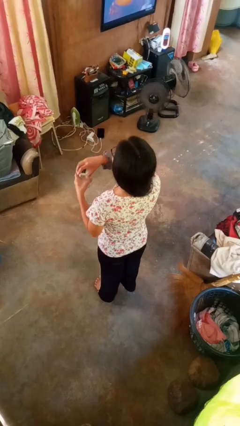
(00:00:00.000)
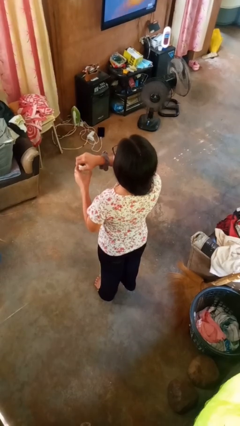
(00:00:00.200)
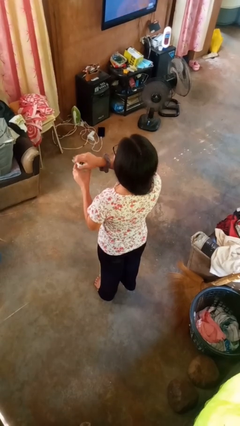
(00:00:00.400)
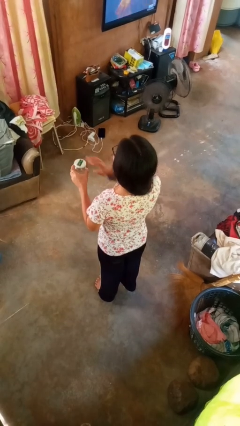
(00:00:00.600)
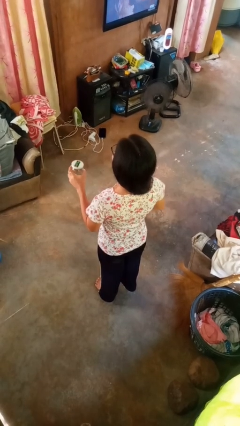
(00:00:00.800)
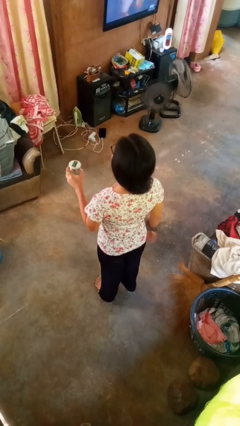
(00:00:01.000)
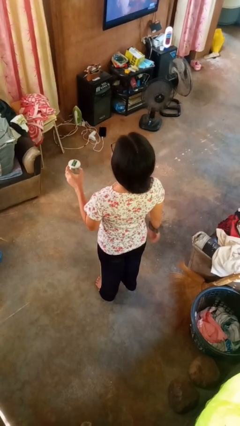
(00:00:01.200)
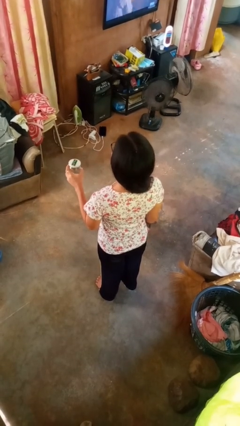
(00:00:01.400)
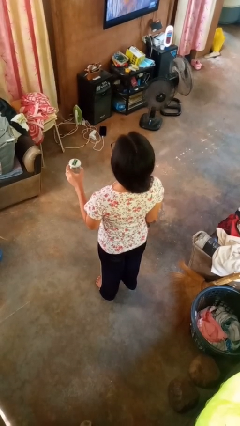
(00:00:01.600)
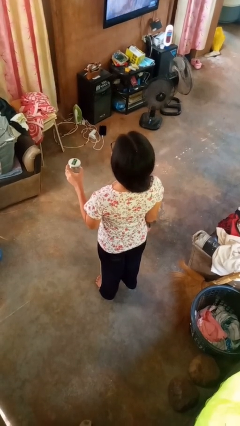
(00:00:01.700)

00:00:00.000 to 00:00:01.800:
person closes jar

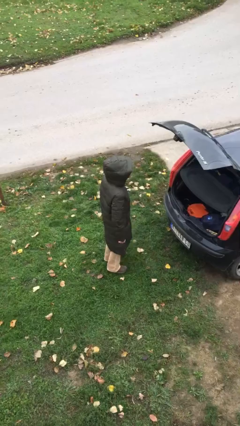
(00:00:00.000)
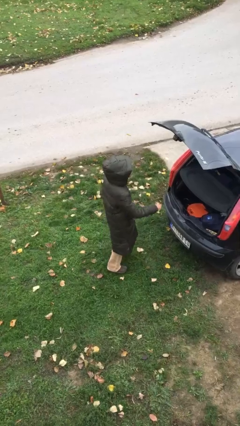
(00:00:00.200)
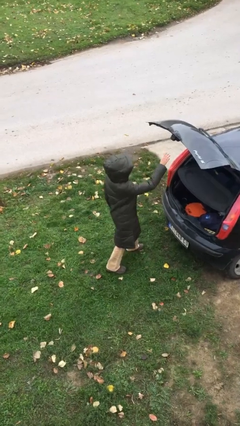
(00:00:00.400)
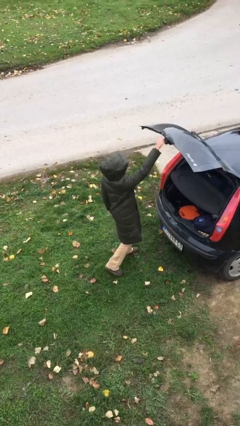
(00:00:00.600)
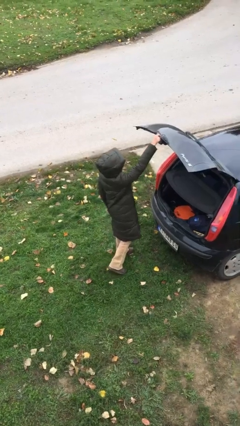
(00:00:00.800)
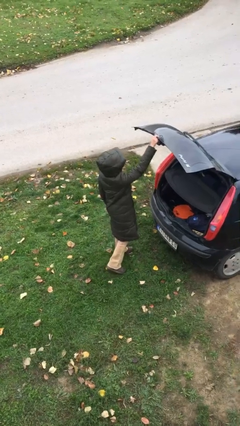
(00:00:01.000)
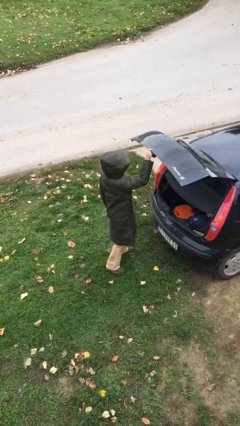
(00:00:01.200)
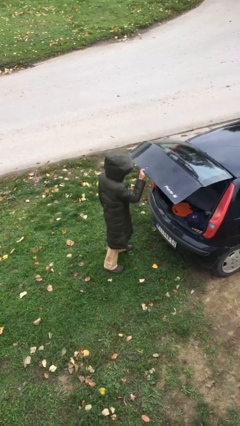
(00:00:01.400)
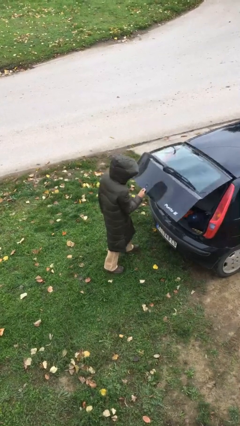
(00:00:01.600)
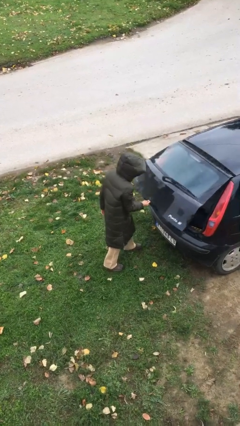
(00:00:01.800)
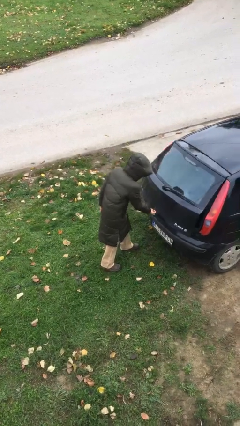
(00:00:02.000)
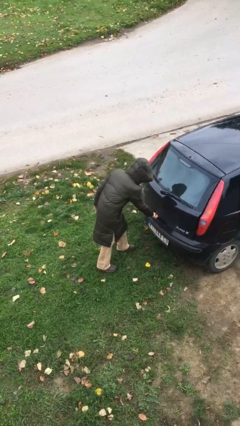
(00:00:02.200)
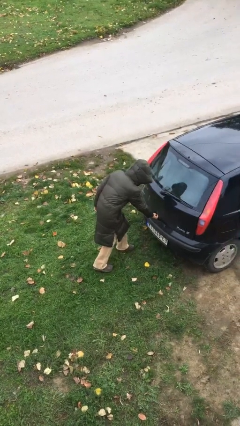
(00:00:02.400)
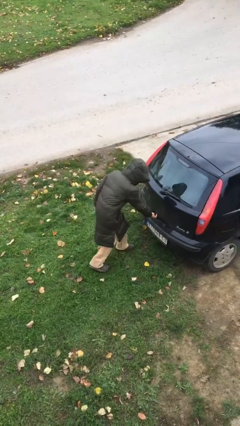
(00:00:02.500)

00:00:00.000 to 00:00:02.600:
person closes car trunk

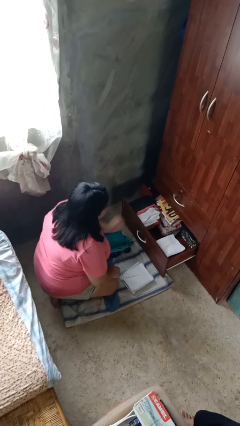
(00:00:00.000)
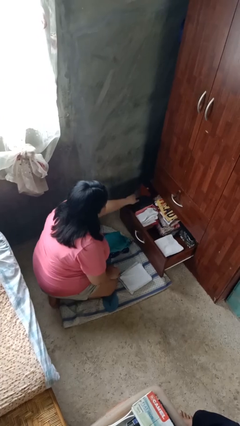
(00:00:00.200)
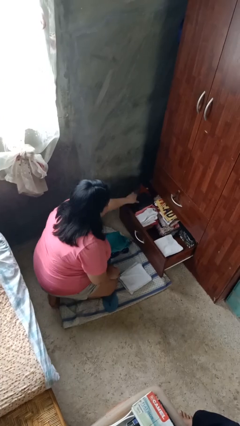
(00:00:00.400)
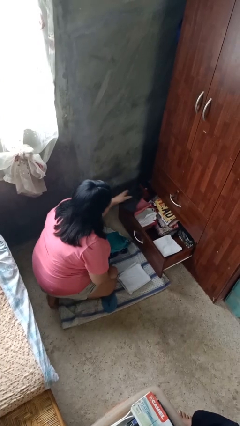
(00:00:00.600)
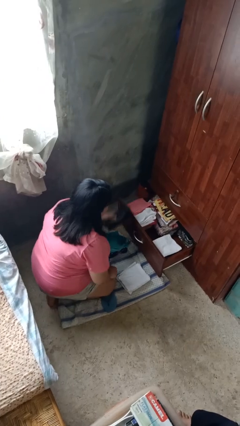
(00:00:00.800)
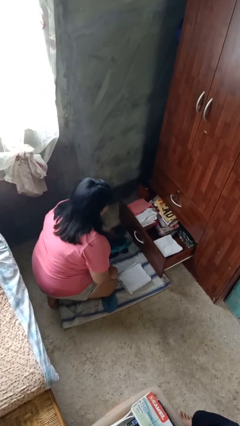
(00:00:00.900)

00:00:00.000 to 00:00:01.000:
person takes clothes from dresser

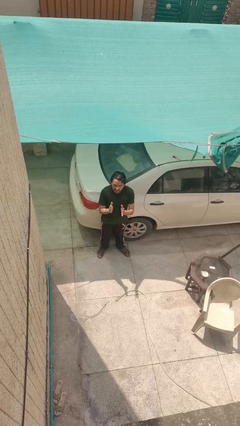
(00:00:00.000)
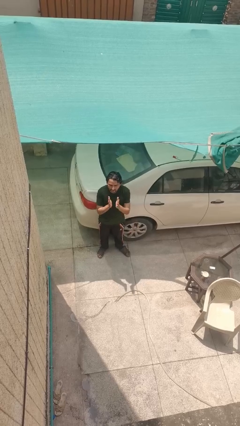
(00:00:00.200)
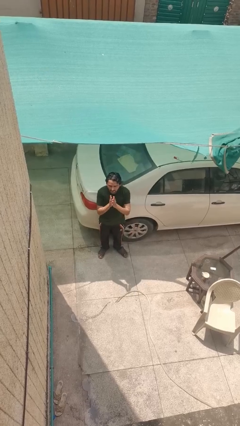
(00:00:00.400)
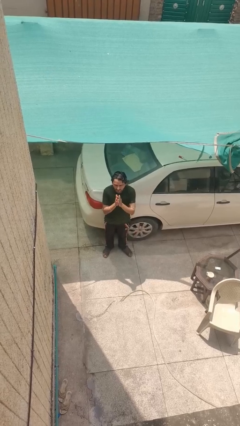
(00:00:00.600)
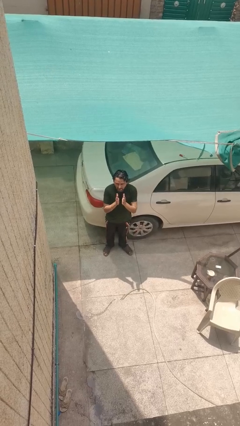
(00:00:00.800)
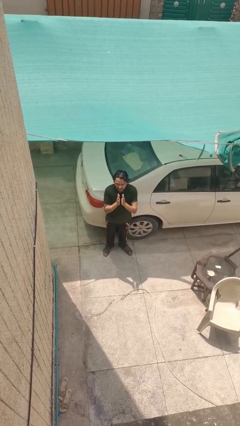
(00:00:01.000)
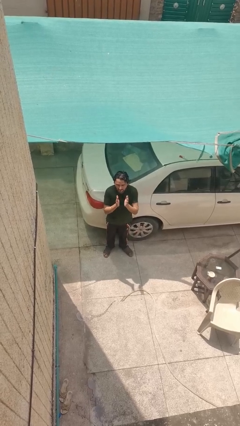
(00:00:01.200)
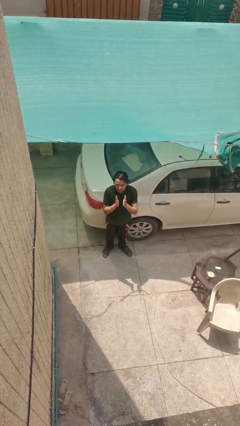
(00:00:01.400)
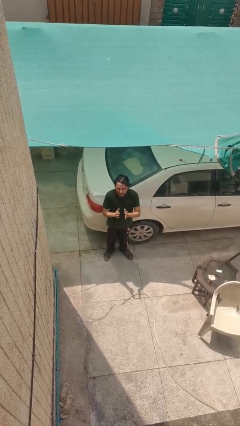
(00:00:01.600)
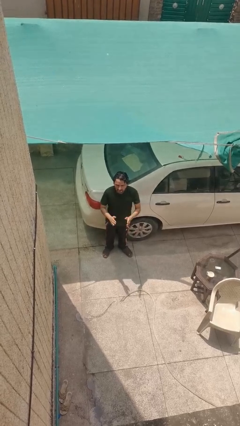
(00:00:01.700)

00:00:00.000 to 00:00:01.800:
person claps hands

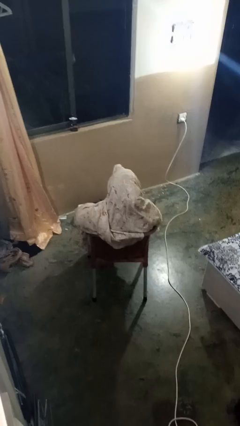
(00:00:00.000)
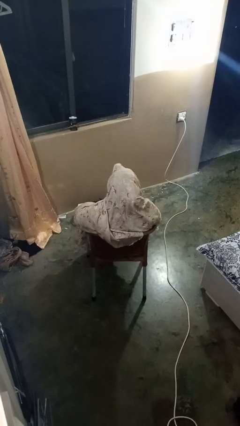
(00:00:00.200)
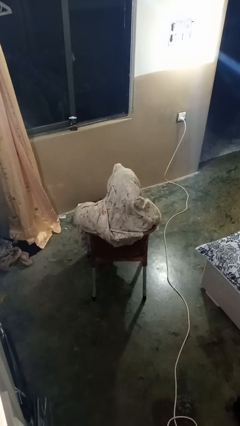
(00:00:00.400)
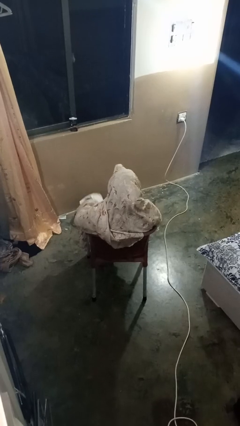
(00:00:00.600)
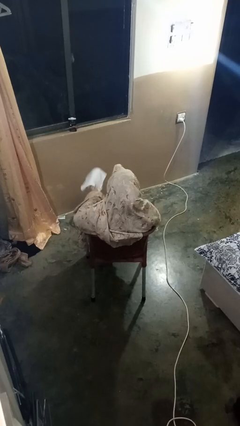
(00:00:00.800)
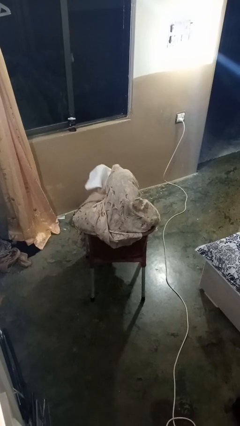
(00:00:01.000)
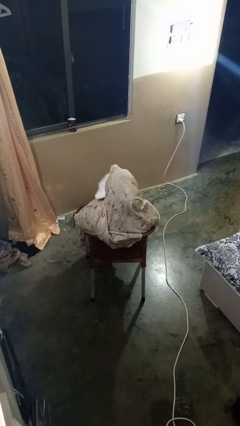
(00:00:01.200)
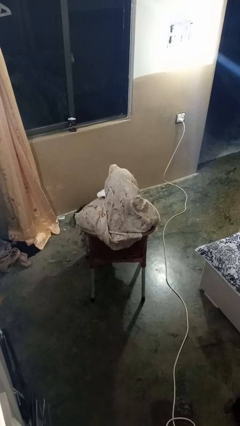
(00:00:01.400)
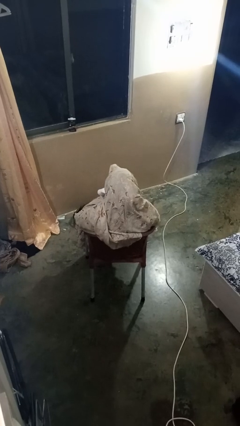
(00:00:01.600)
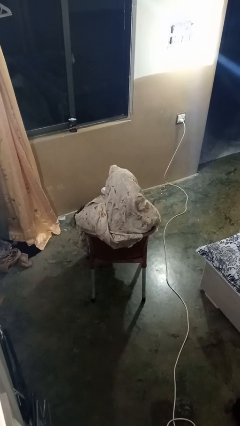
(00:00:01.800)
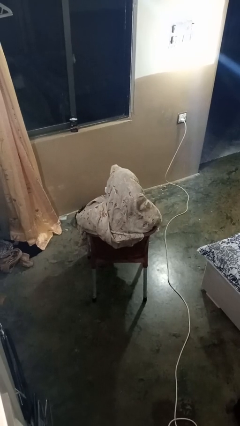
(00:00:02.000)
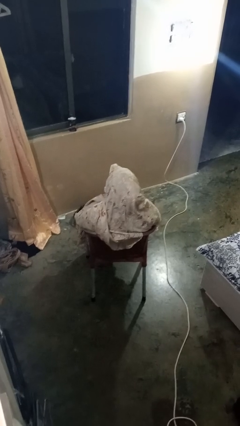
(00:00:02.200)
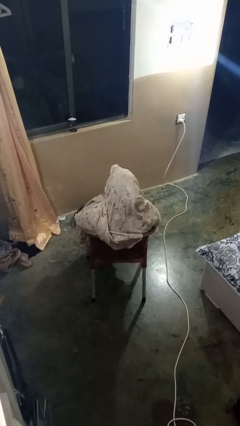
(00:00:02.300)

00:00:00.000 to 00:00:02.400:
person wipes mouth with napkin

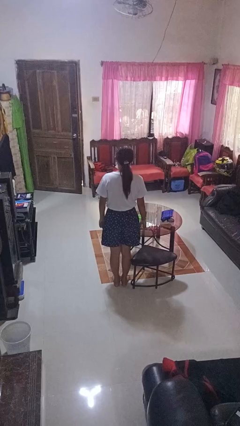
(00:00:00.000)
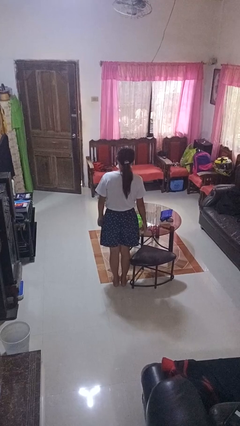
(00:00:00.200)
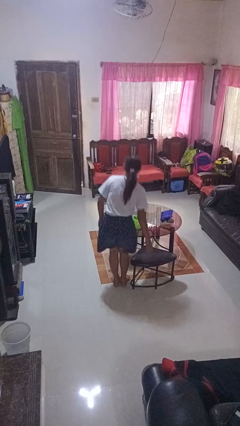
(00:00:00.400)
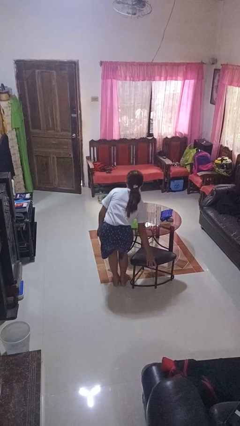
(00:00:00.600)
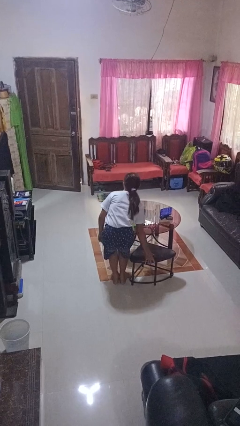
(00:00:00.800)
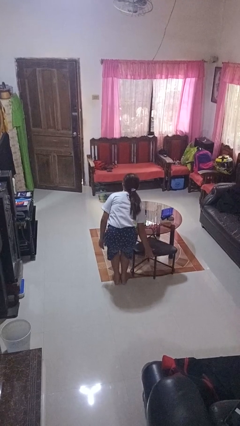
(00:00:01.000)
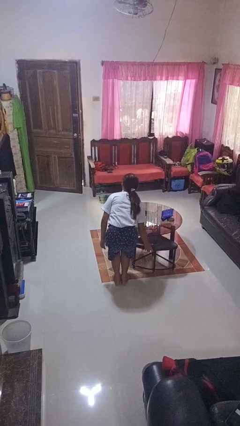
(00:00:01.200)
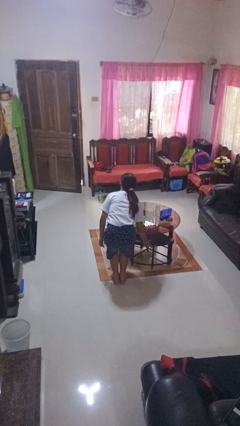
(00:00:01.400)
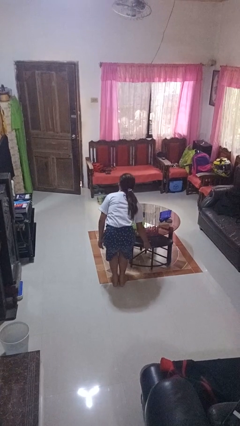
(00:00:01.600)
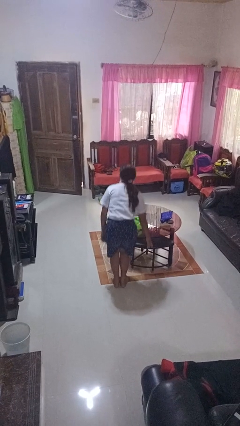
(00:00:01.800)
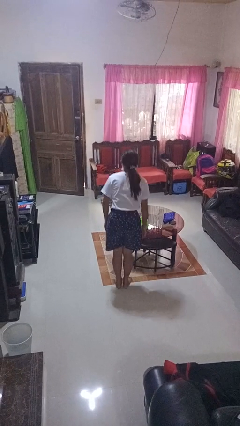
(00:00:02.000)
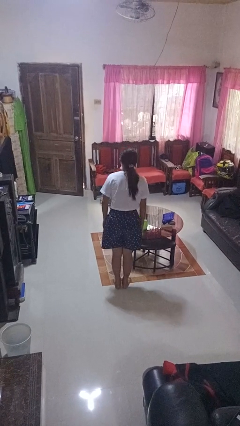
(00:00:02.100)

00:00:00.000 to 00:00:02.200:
person pushes in chair

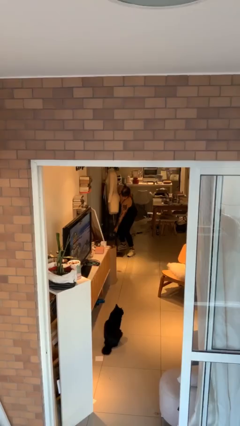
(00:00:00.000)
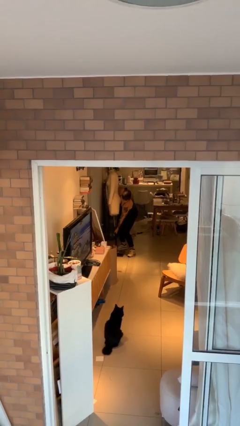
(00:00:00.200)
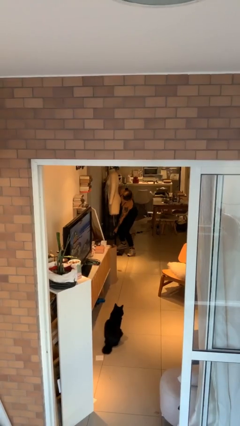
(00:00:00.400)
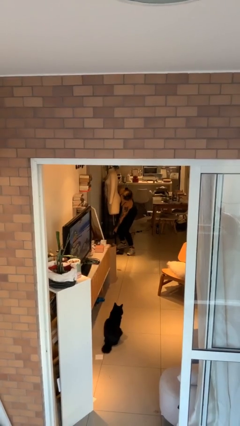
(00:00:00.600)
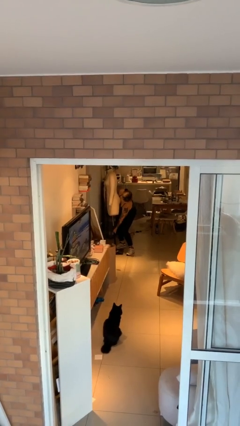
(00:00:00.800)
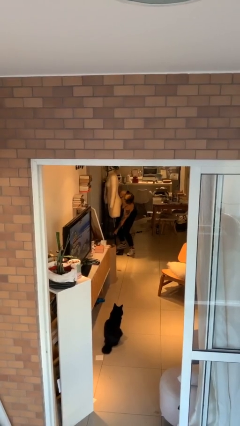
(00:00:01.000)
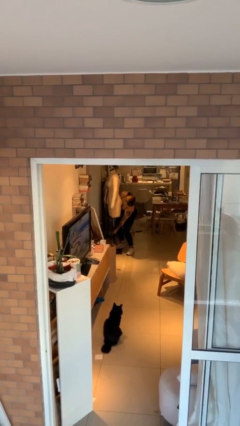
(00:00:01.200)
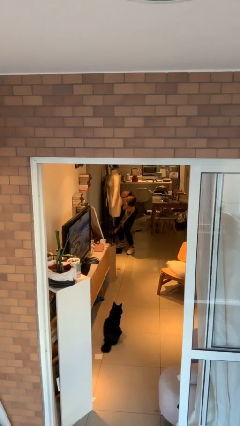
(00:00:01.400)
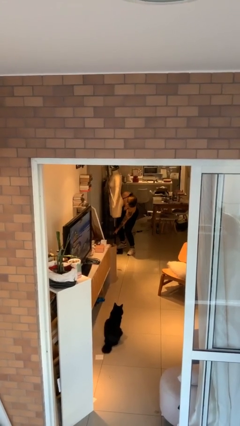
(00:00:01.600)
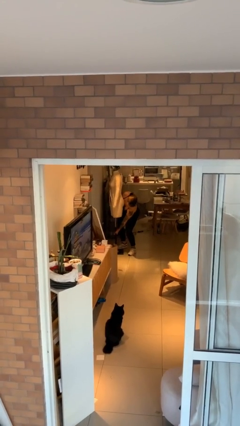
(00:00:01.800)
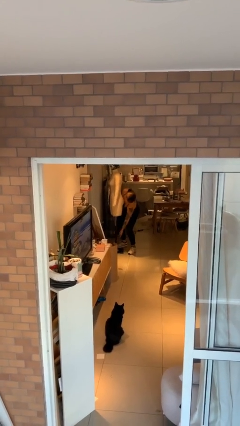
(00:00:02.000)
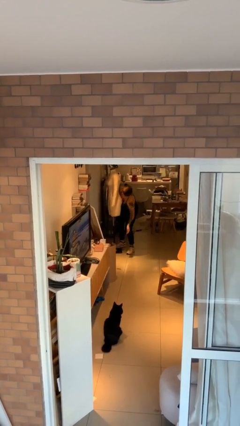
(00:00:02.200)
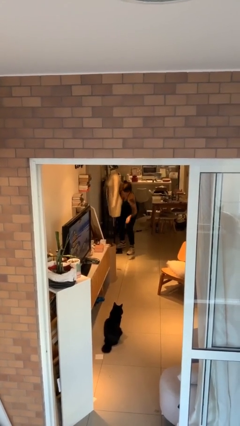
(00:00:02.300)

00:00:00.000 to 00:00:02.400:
person puts down object on floor

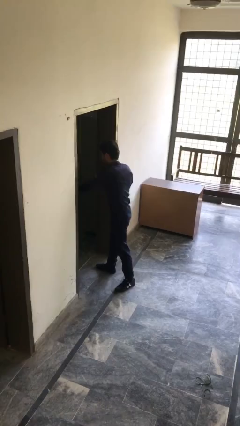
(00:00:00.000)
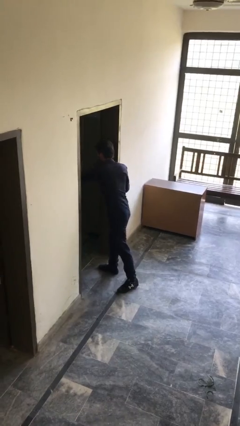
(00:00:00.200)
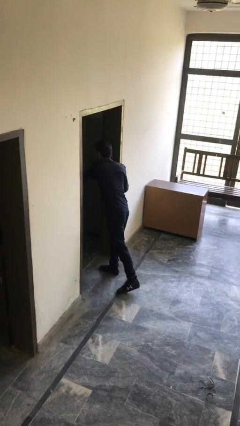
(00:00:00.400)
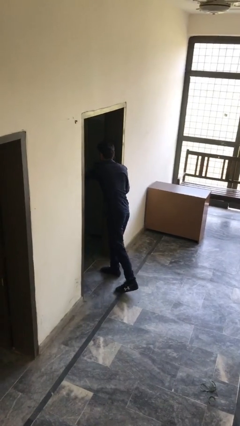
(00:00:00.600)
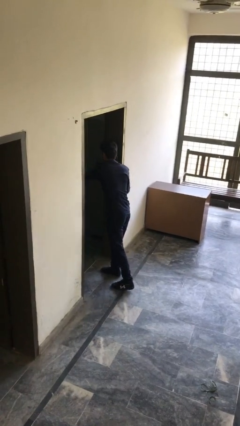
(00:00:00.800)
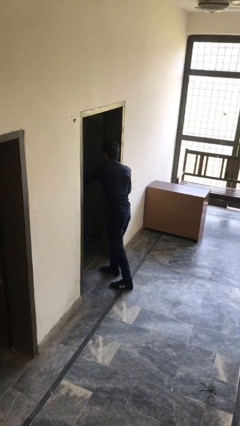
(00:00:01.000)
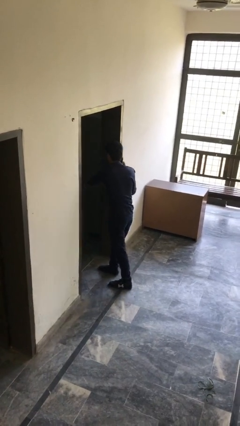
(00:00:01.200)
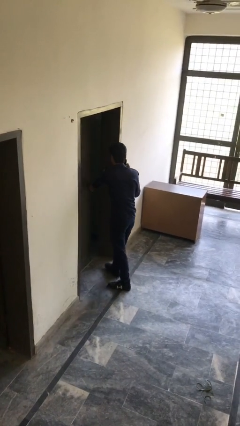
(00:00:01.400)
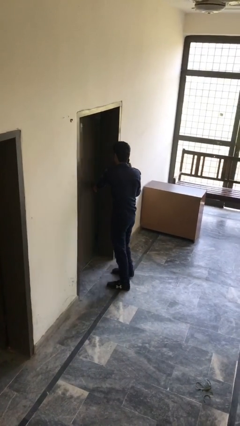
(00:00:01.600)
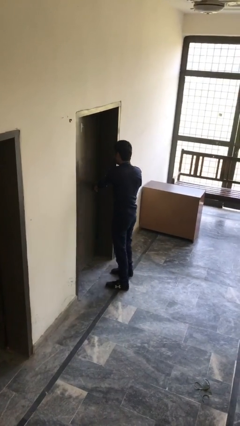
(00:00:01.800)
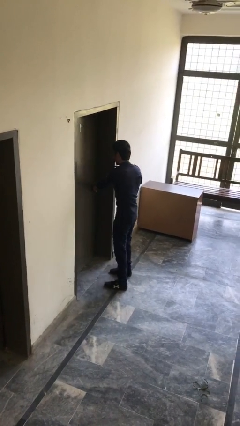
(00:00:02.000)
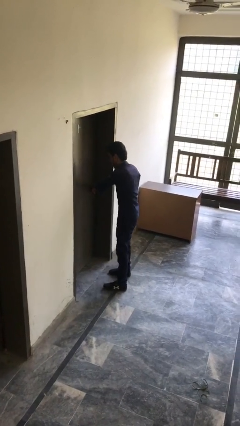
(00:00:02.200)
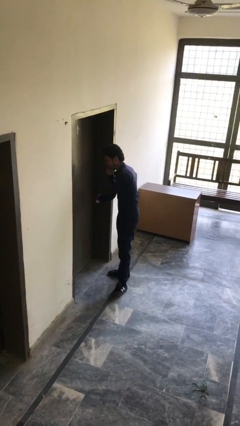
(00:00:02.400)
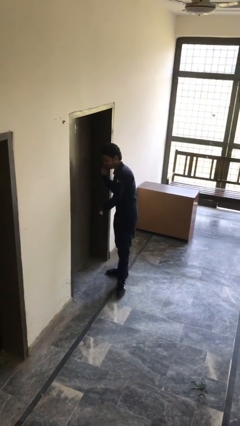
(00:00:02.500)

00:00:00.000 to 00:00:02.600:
person closes facility door
